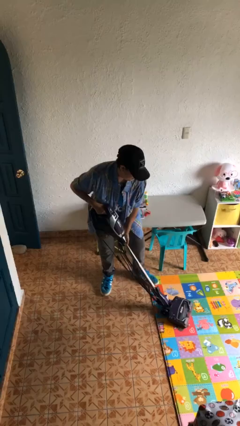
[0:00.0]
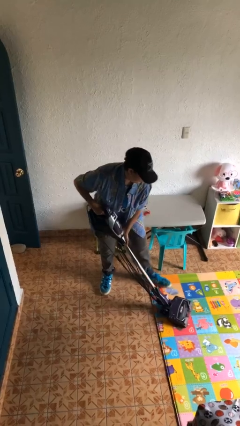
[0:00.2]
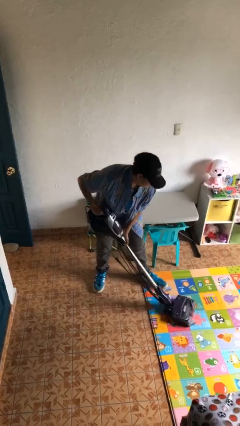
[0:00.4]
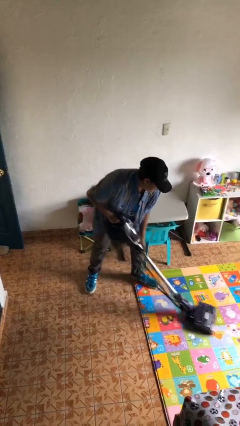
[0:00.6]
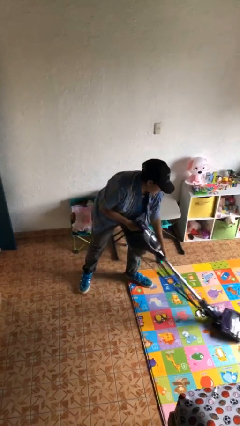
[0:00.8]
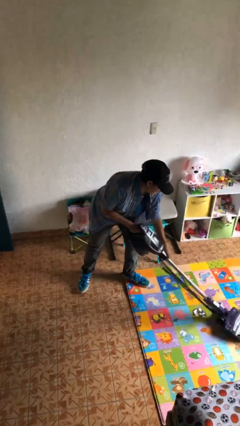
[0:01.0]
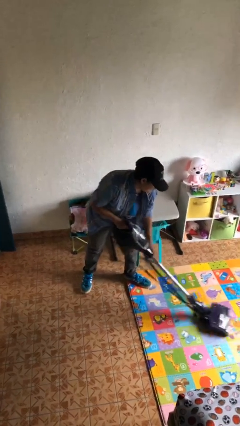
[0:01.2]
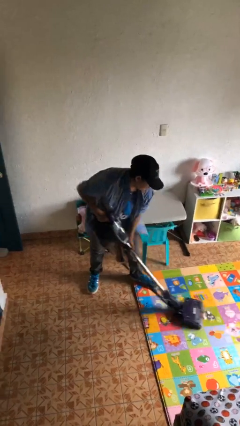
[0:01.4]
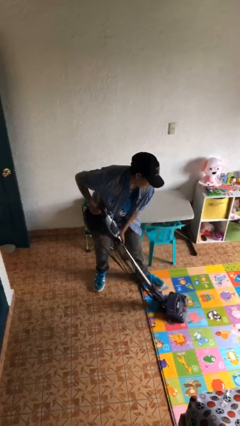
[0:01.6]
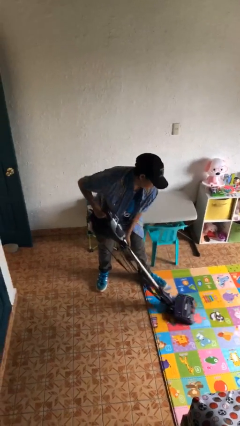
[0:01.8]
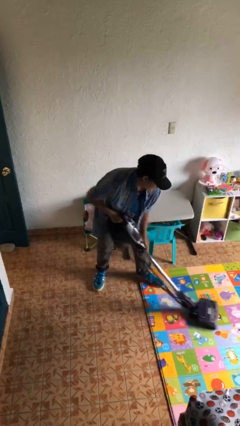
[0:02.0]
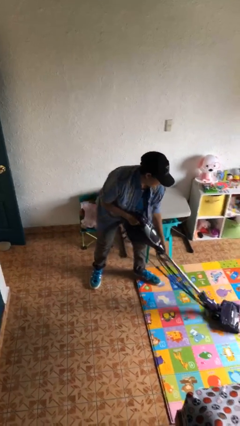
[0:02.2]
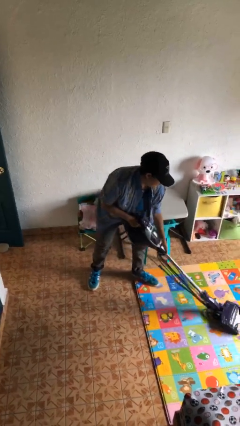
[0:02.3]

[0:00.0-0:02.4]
person vacuums carpet

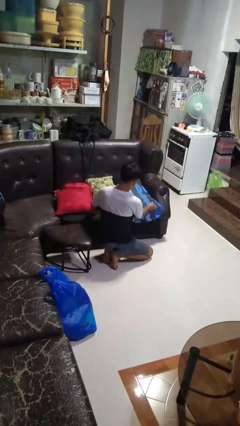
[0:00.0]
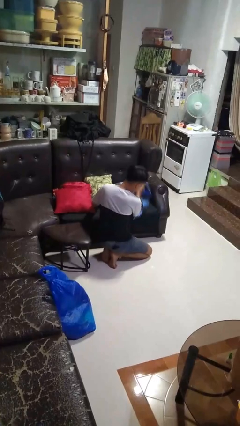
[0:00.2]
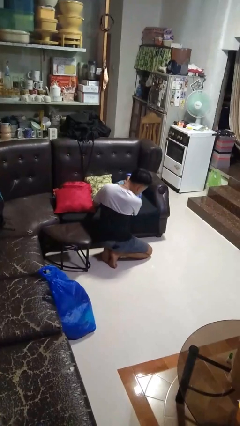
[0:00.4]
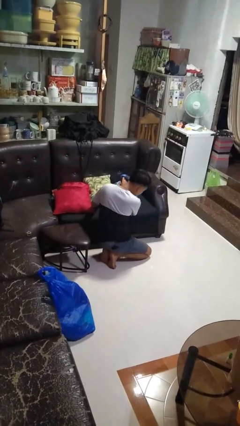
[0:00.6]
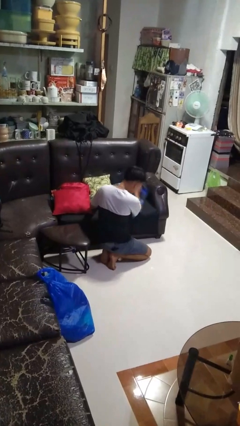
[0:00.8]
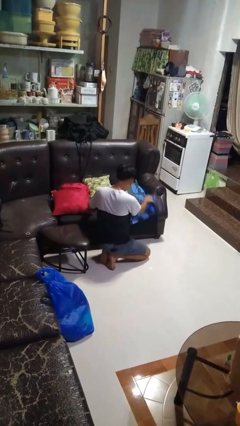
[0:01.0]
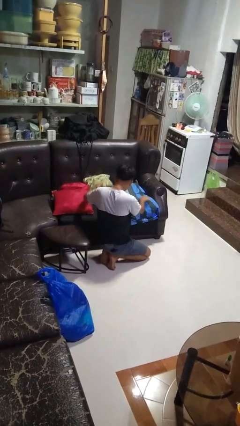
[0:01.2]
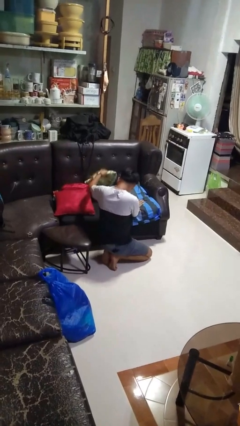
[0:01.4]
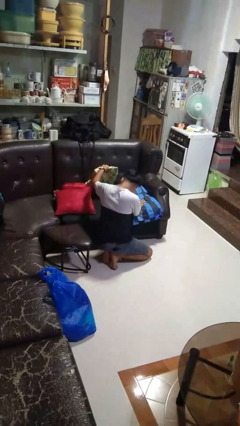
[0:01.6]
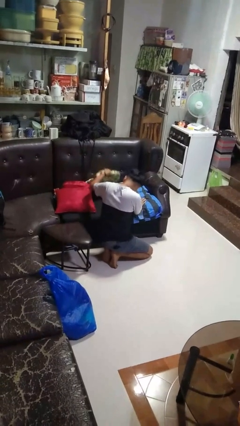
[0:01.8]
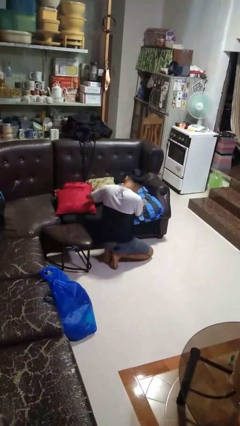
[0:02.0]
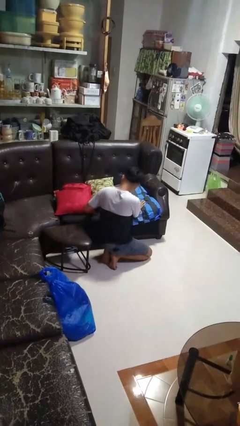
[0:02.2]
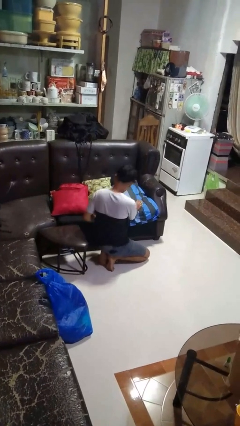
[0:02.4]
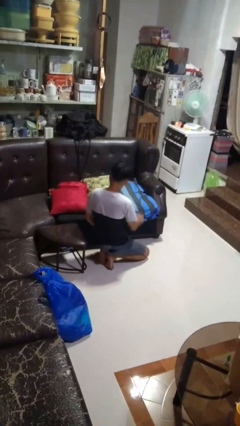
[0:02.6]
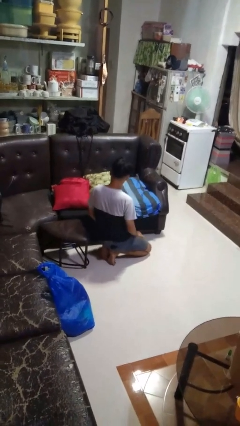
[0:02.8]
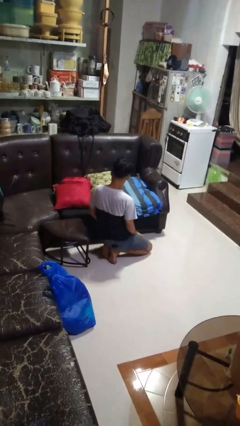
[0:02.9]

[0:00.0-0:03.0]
person searches in couch

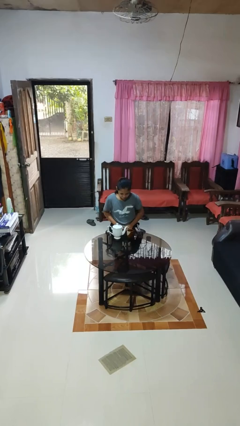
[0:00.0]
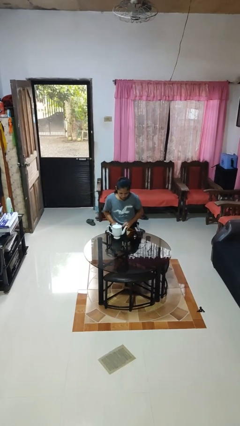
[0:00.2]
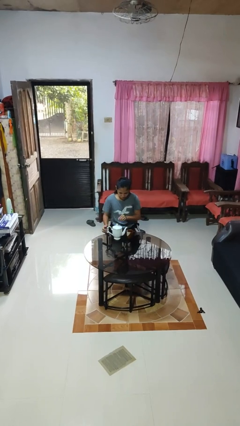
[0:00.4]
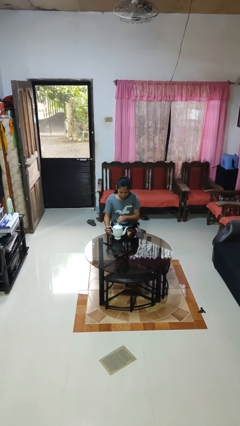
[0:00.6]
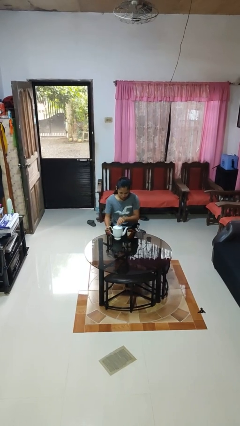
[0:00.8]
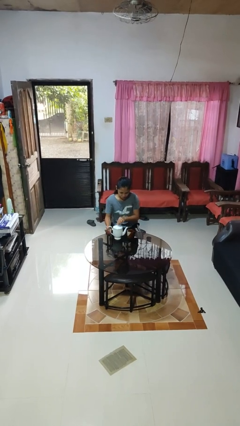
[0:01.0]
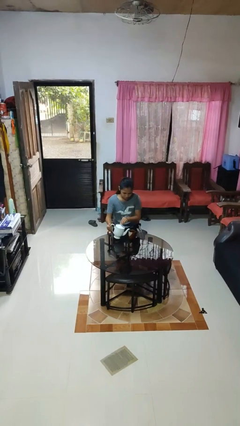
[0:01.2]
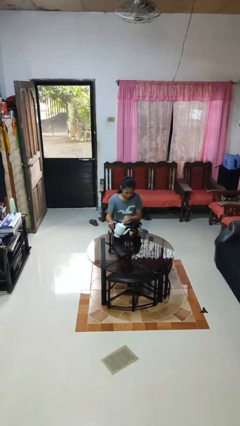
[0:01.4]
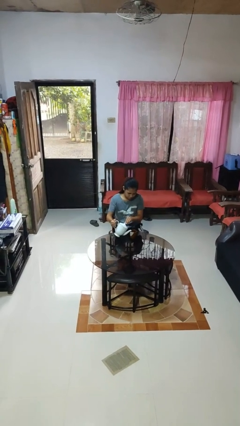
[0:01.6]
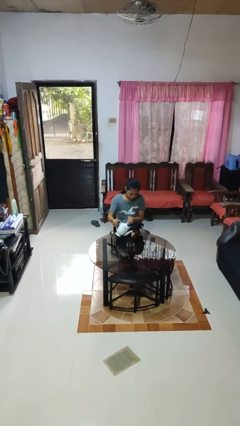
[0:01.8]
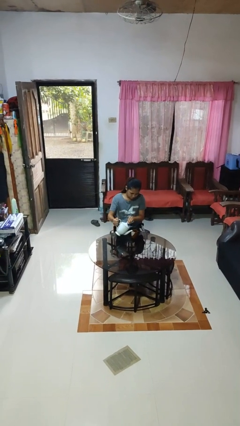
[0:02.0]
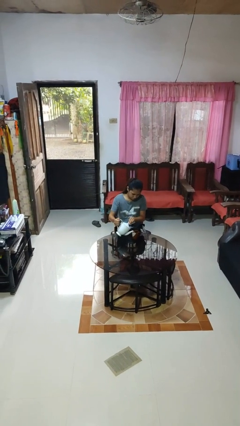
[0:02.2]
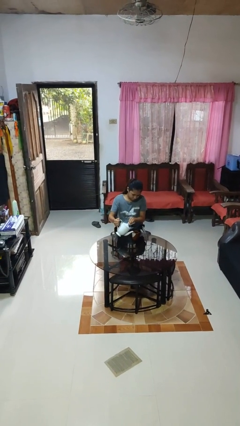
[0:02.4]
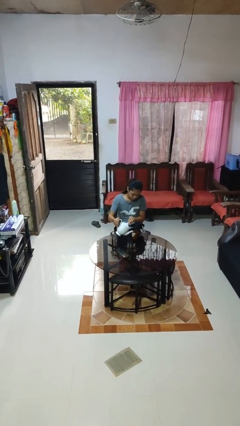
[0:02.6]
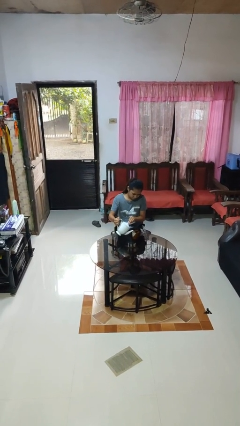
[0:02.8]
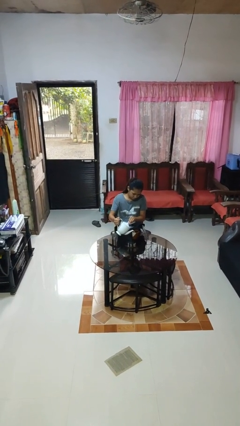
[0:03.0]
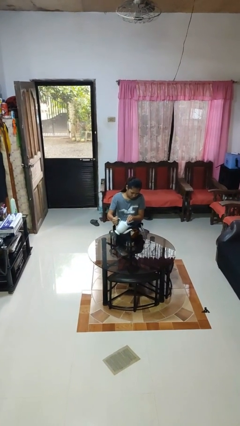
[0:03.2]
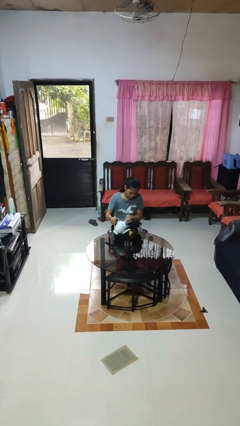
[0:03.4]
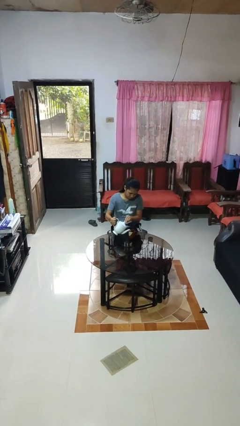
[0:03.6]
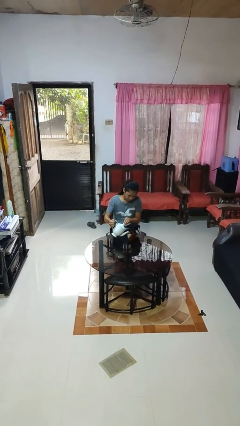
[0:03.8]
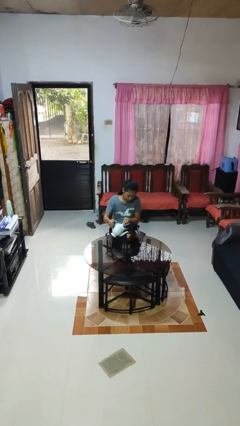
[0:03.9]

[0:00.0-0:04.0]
person pours coffee into mug

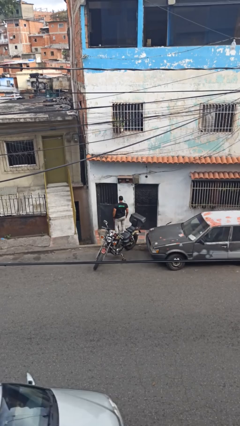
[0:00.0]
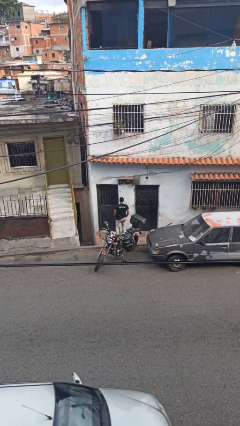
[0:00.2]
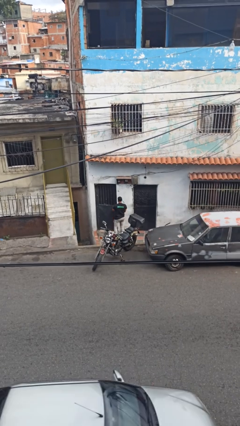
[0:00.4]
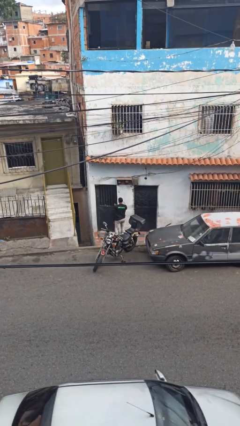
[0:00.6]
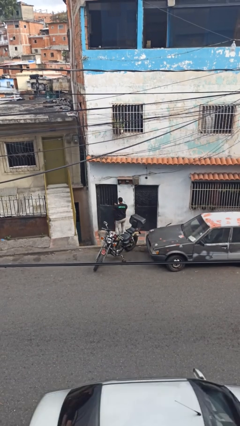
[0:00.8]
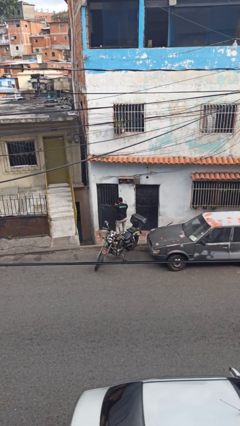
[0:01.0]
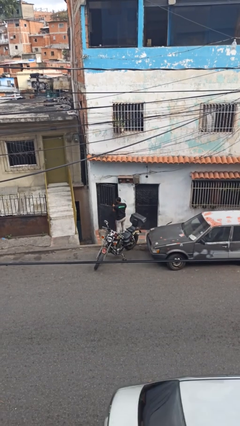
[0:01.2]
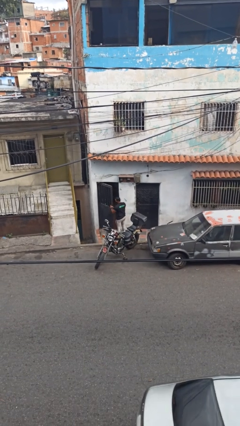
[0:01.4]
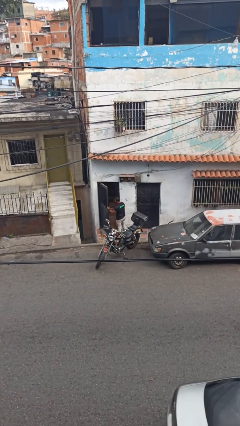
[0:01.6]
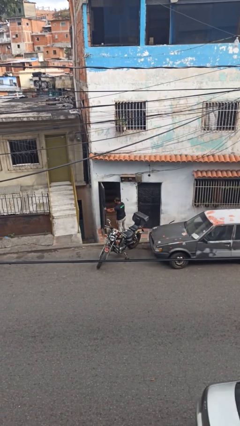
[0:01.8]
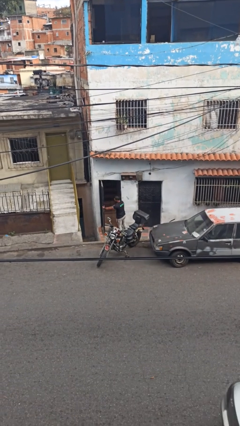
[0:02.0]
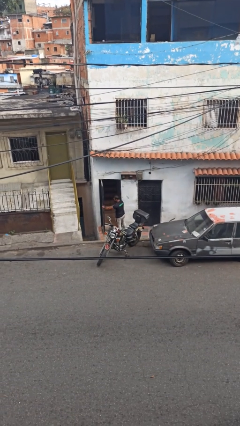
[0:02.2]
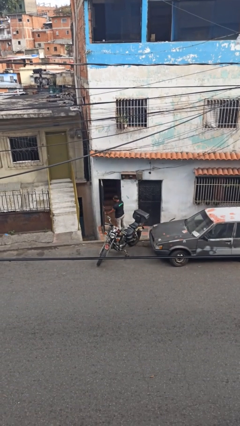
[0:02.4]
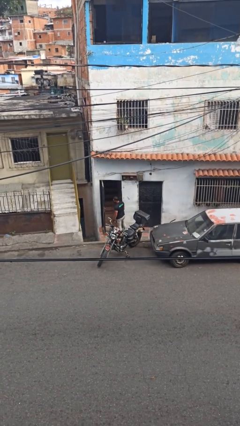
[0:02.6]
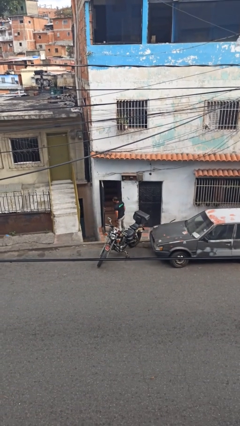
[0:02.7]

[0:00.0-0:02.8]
person opens facility door

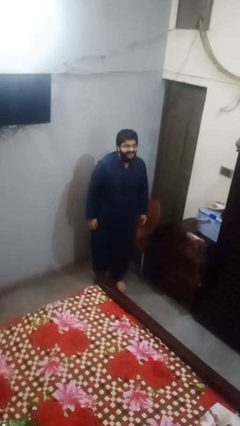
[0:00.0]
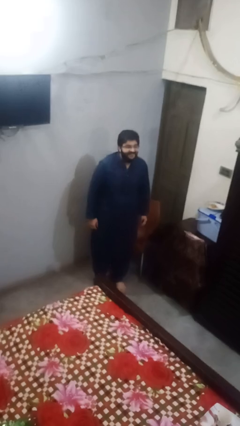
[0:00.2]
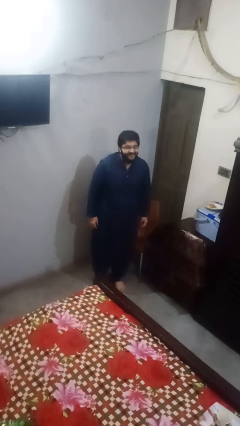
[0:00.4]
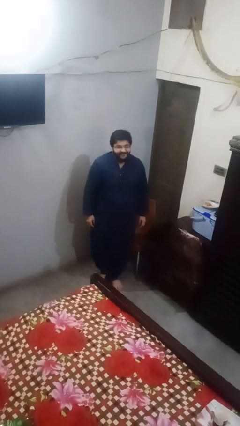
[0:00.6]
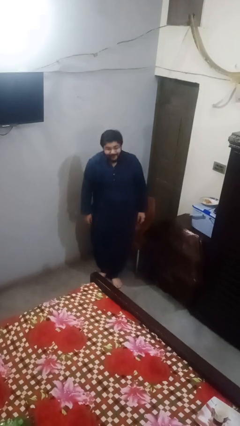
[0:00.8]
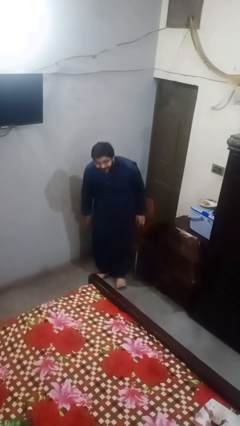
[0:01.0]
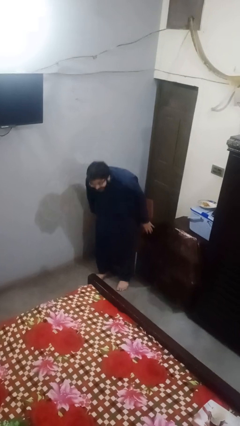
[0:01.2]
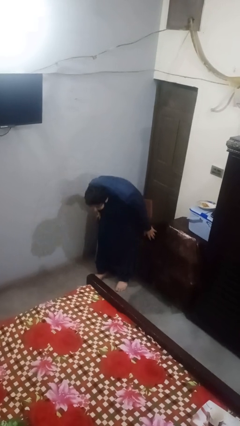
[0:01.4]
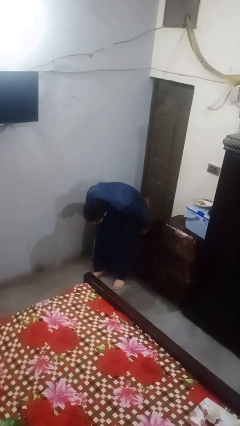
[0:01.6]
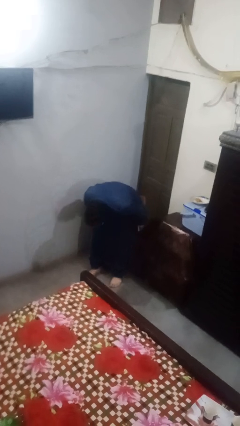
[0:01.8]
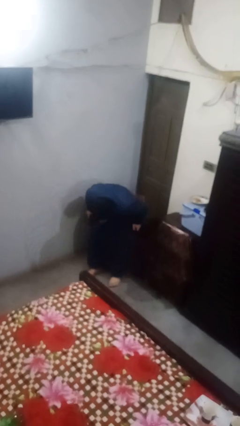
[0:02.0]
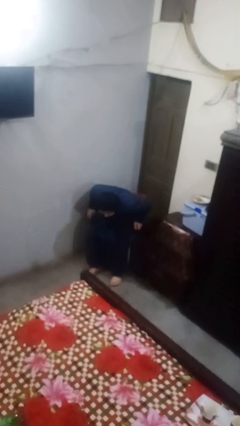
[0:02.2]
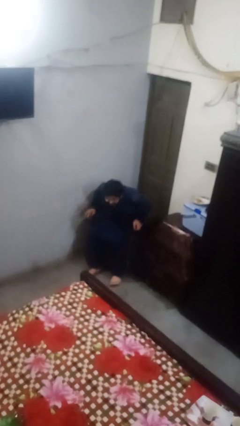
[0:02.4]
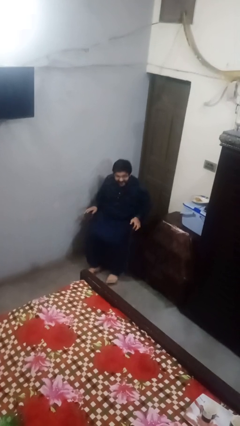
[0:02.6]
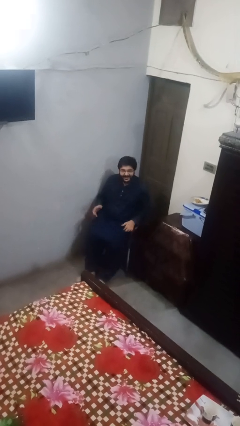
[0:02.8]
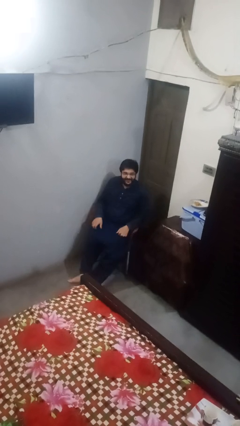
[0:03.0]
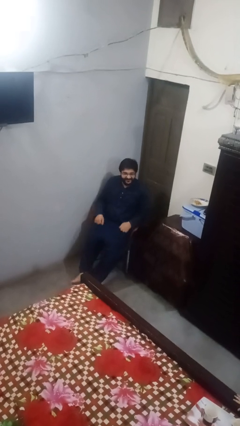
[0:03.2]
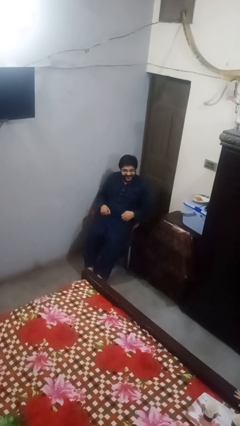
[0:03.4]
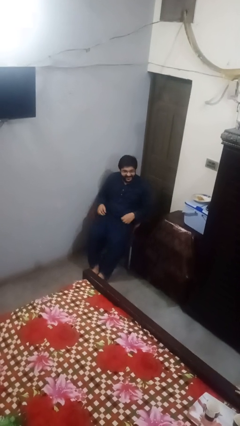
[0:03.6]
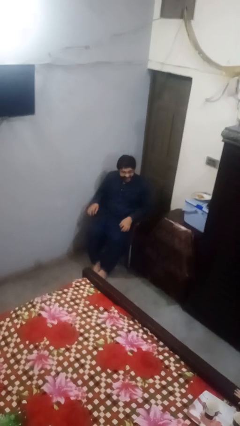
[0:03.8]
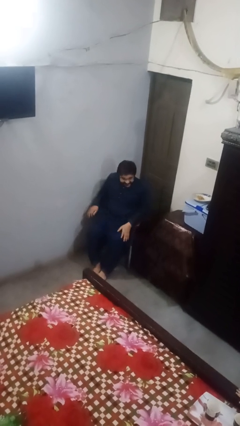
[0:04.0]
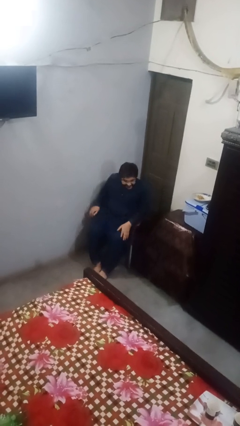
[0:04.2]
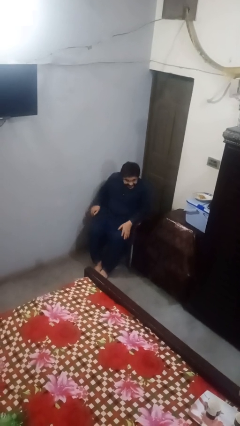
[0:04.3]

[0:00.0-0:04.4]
person sits down

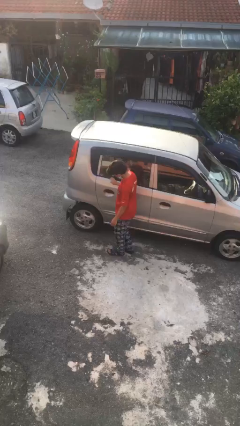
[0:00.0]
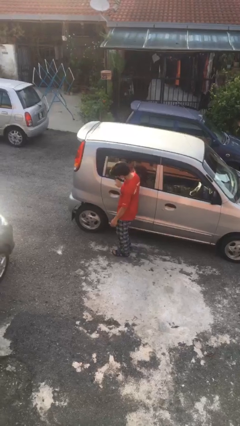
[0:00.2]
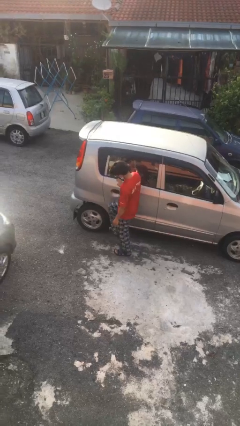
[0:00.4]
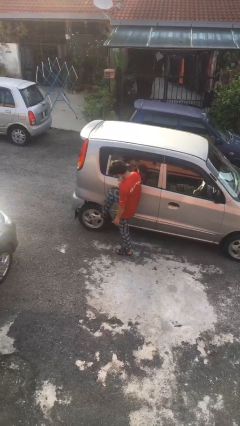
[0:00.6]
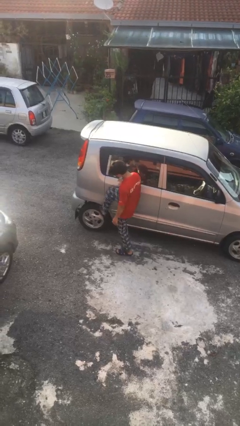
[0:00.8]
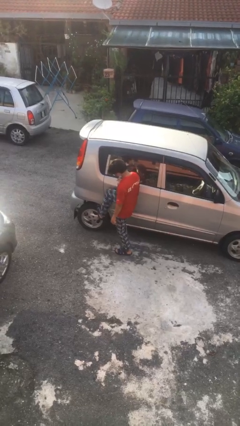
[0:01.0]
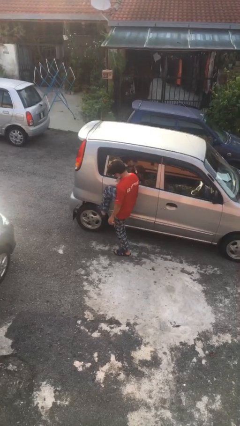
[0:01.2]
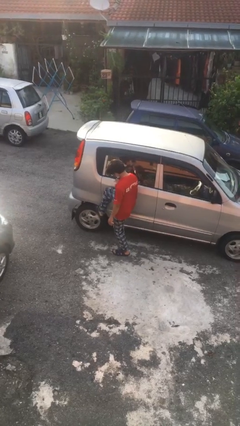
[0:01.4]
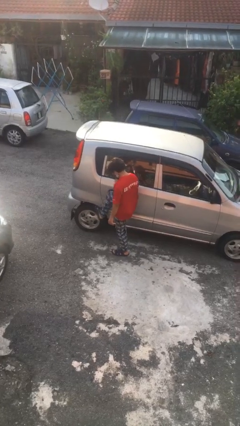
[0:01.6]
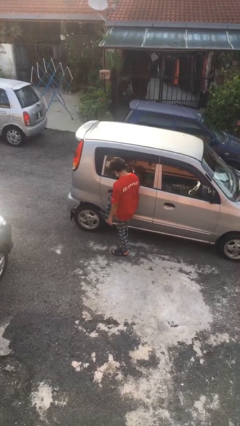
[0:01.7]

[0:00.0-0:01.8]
person kicks car tires
